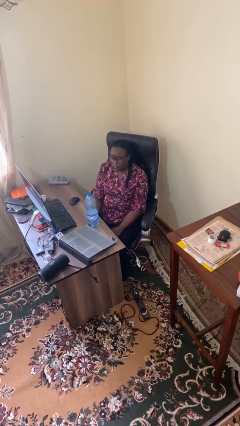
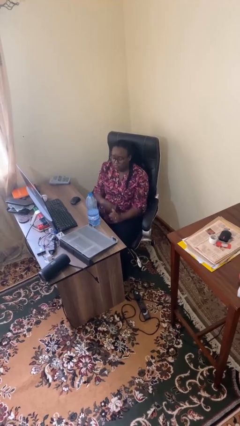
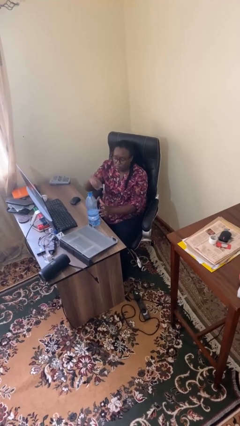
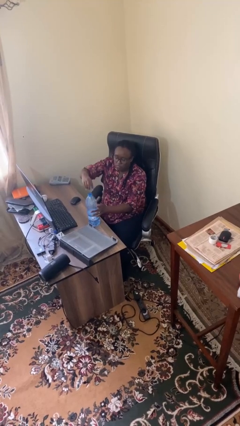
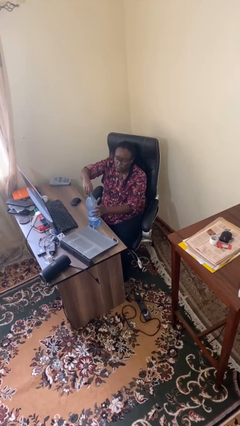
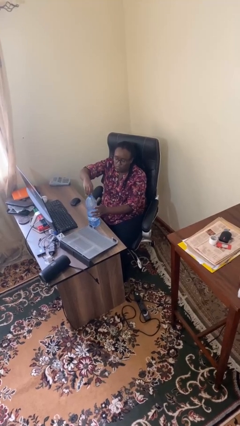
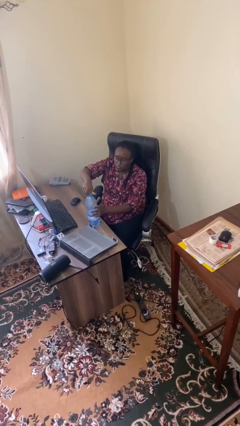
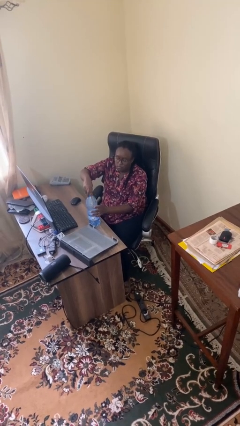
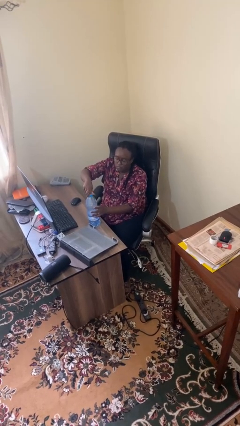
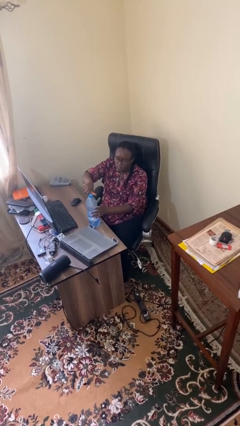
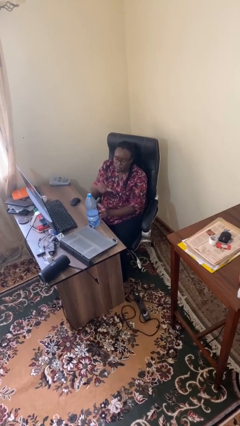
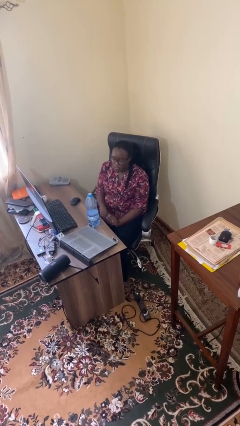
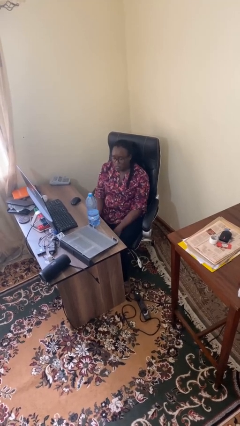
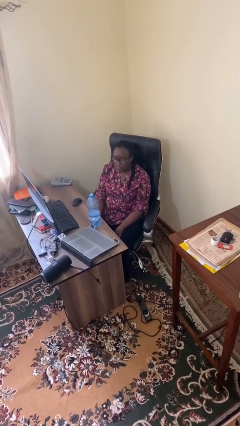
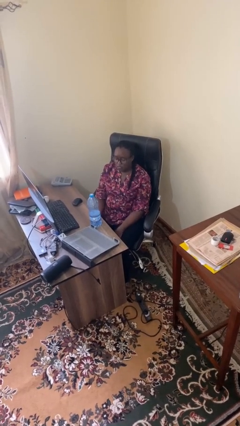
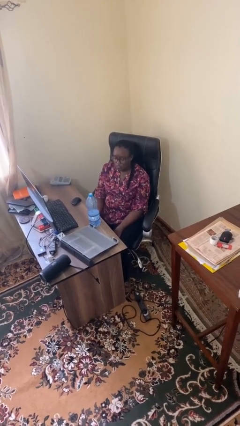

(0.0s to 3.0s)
person screws lid to bottle

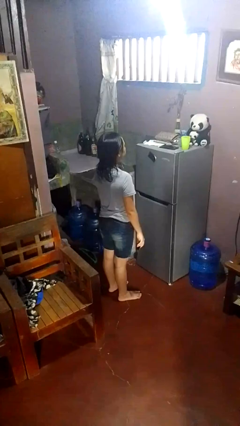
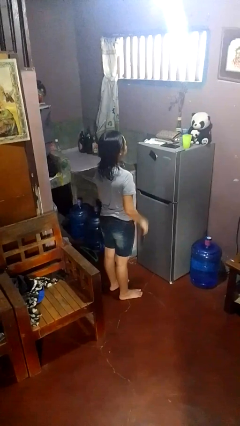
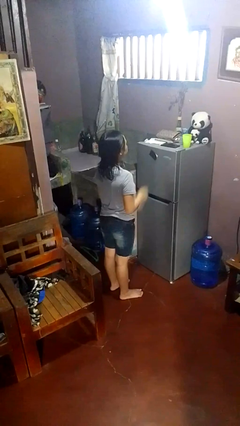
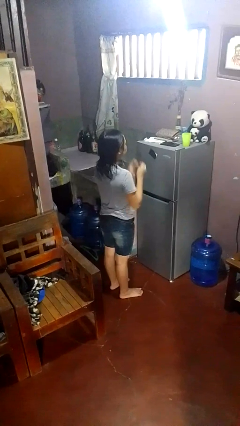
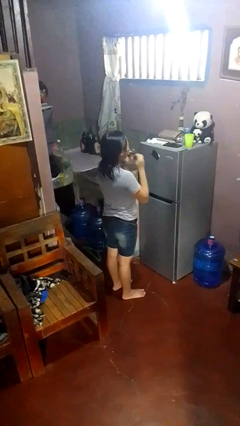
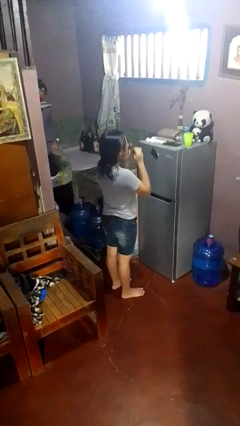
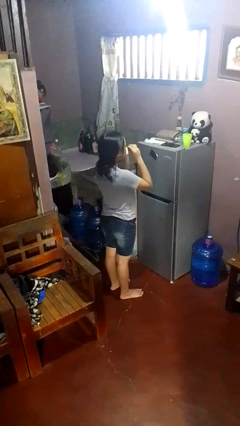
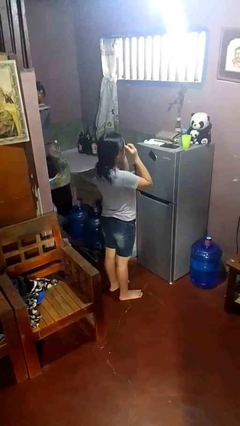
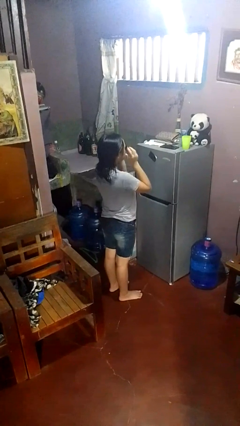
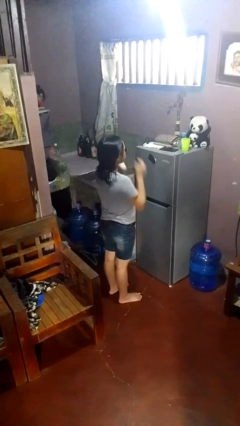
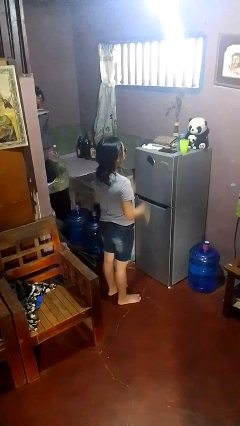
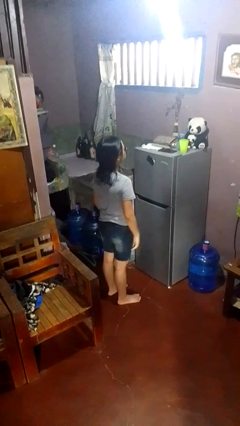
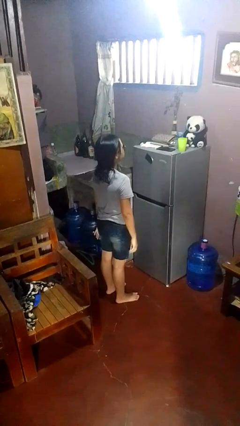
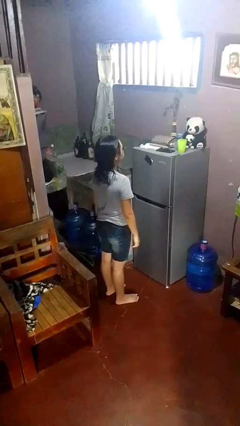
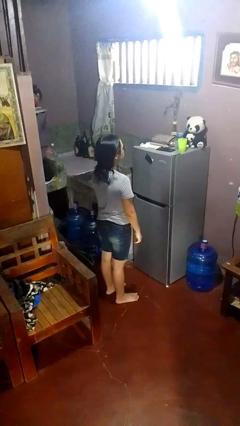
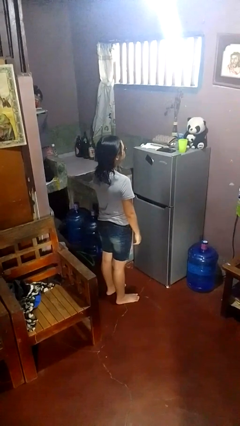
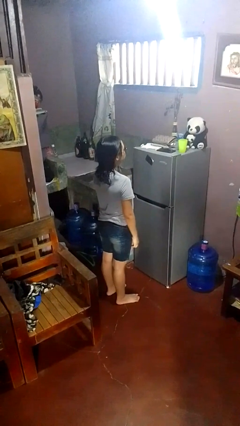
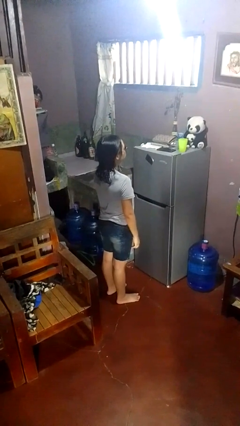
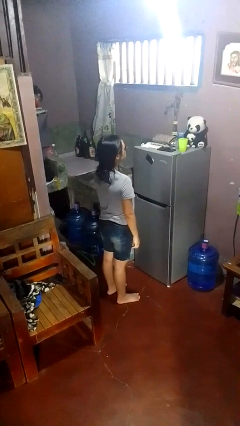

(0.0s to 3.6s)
person puts on sunglasses

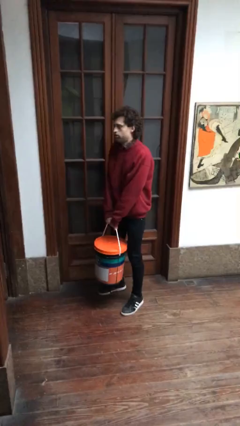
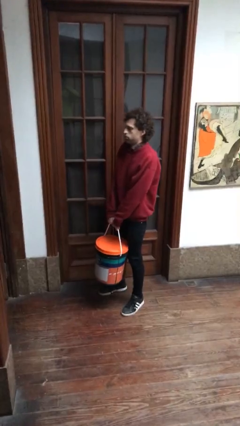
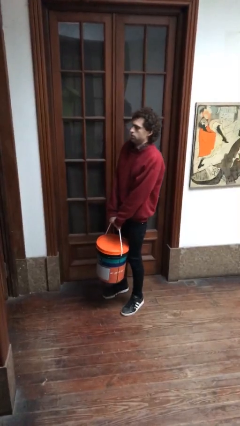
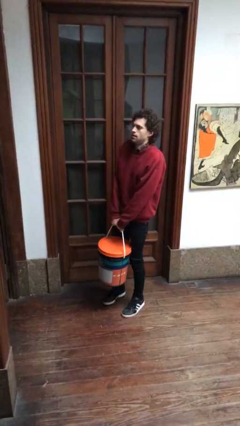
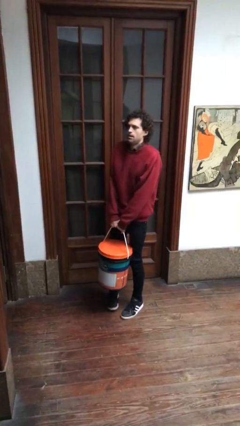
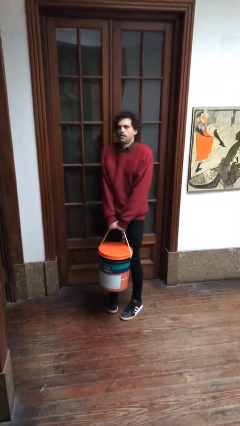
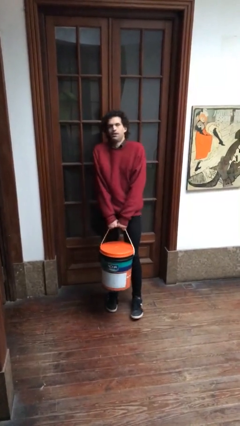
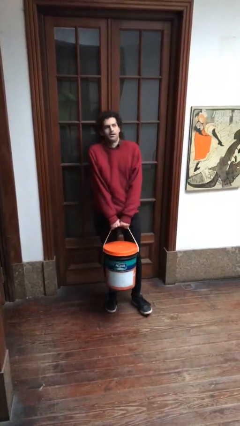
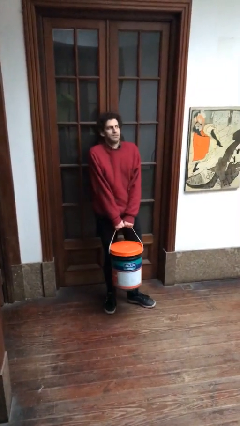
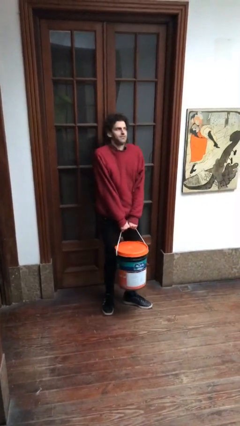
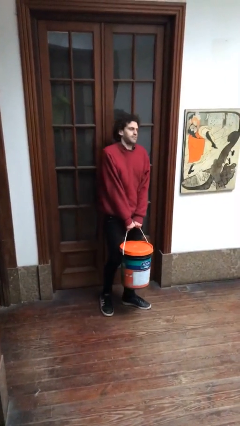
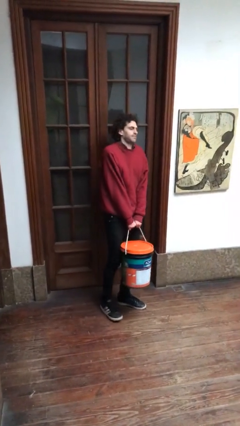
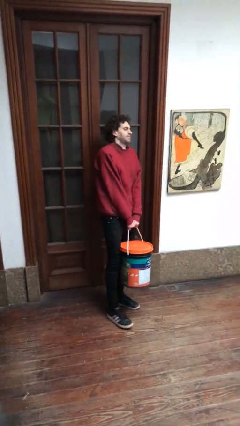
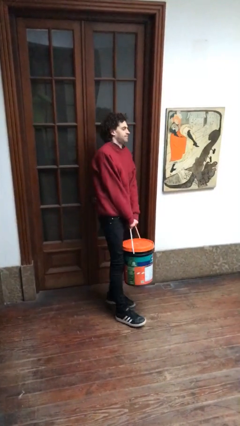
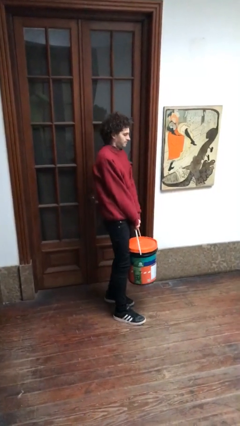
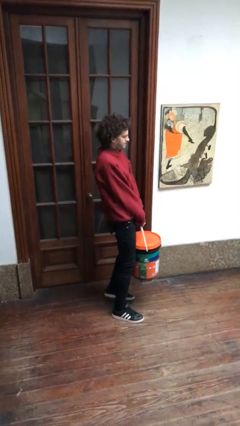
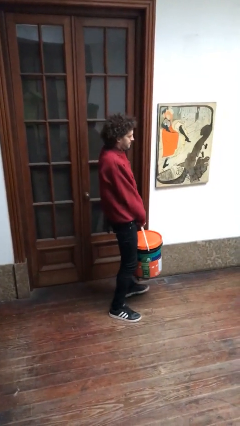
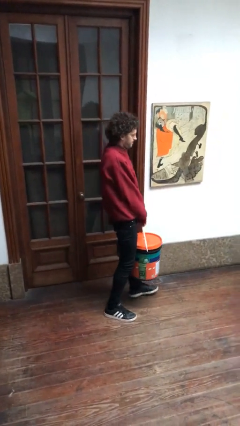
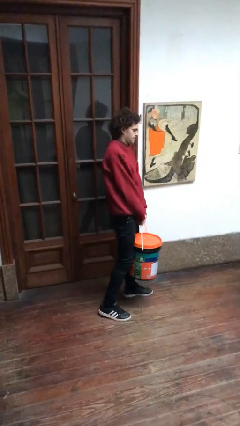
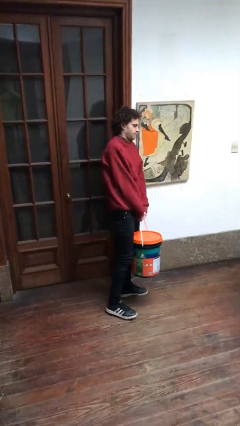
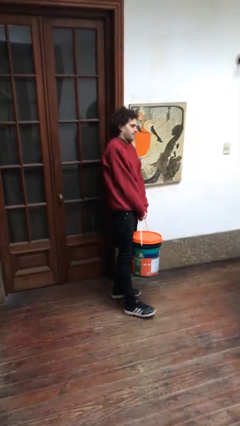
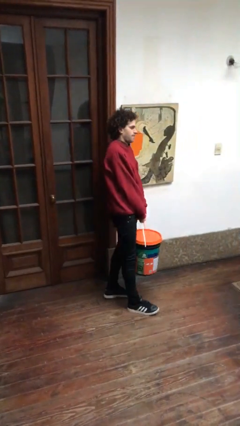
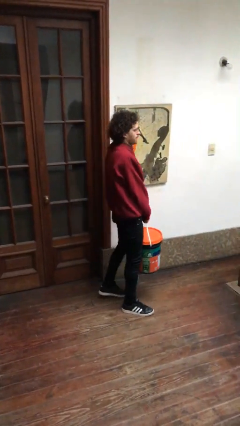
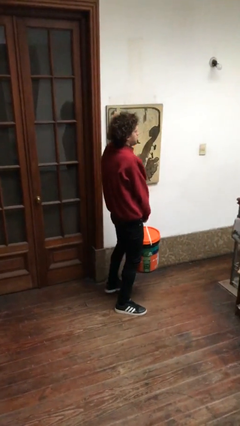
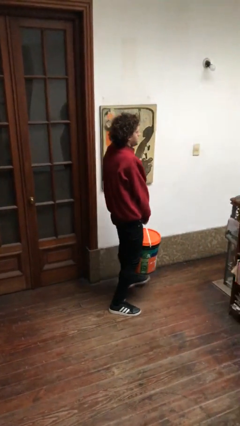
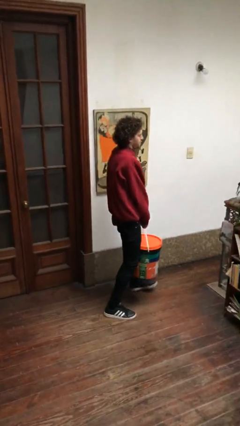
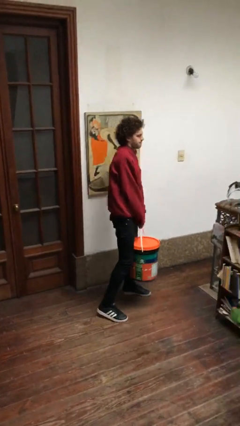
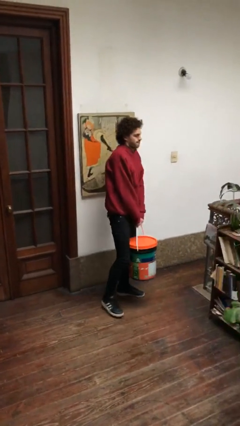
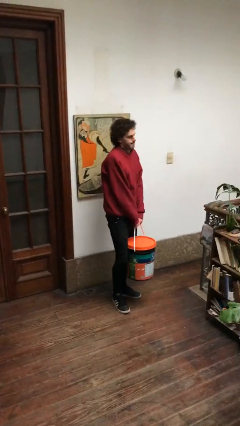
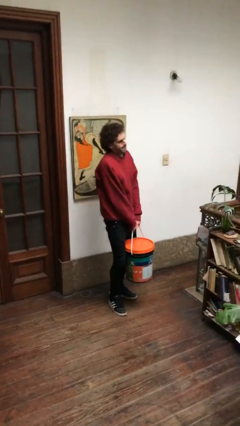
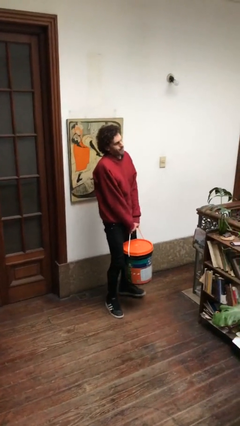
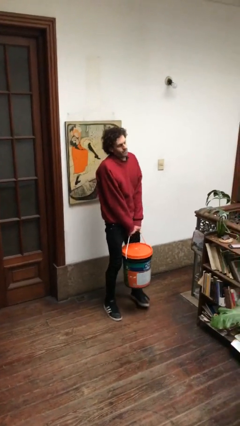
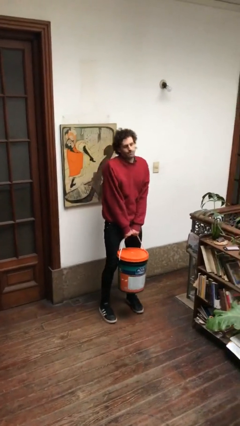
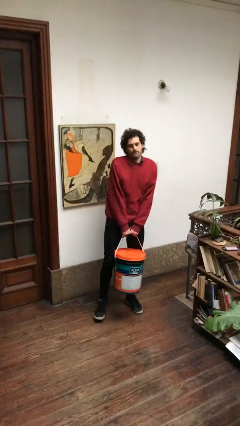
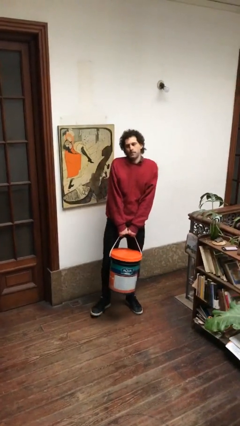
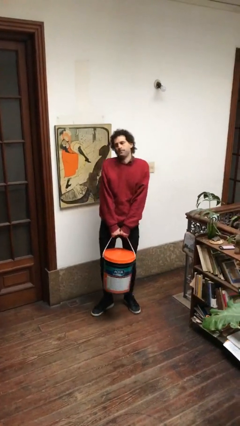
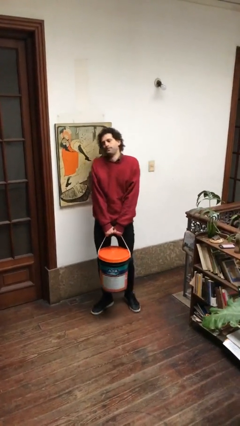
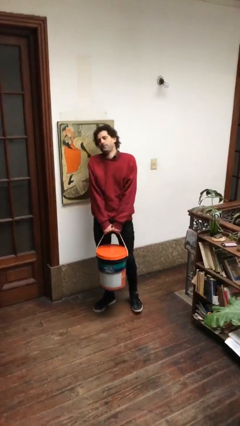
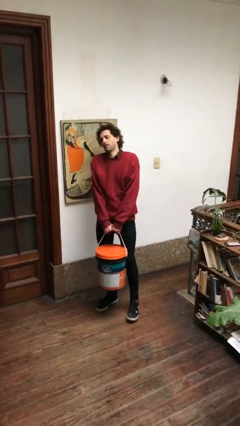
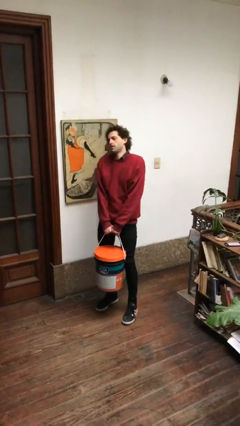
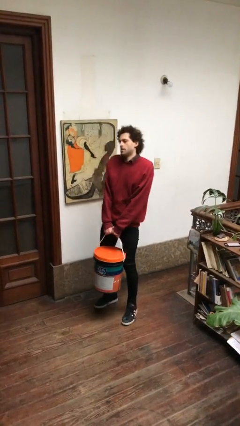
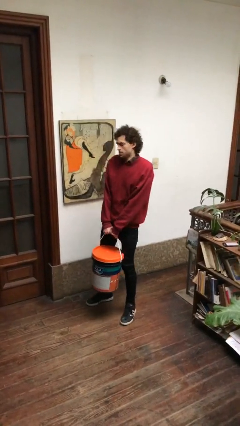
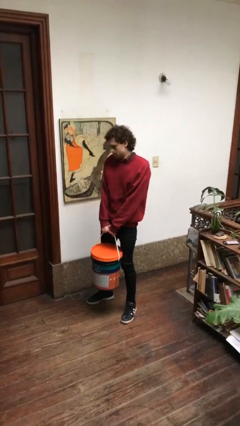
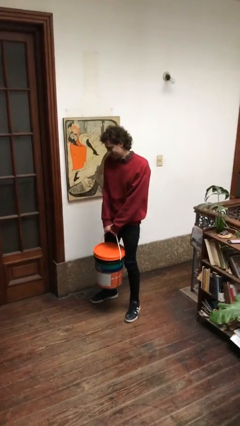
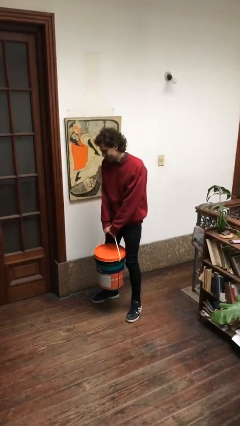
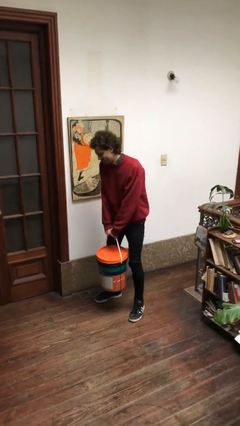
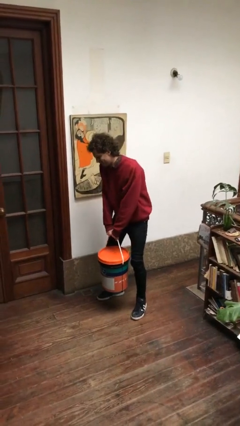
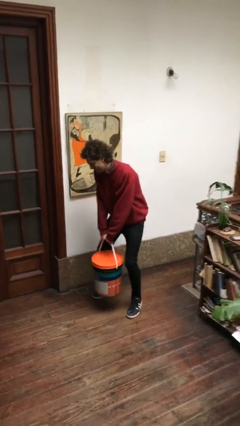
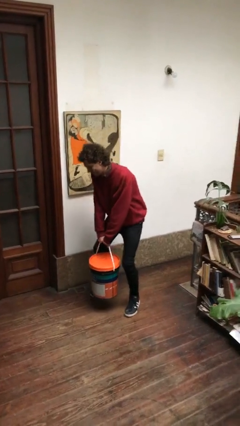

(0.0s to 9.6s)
person carries heavy object

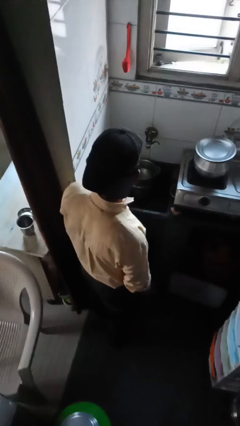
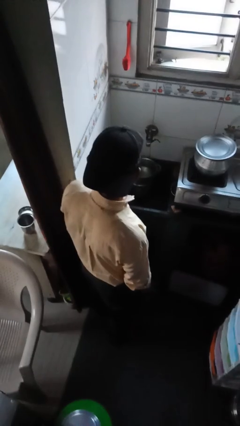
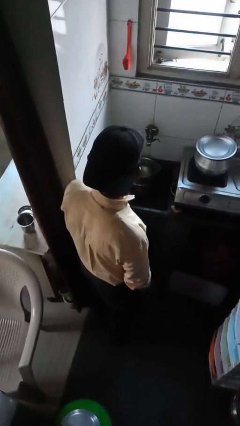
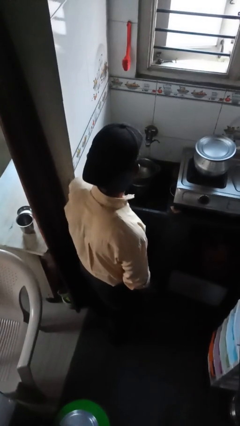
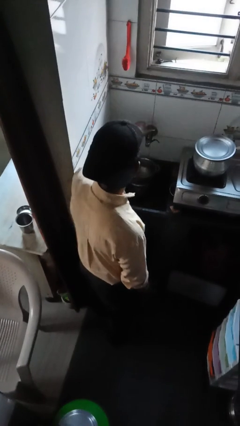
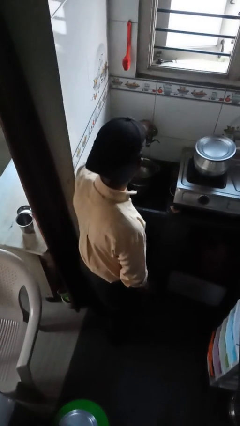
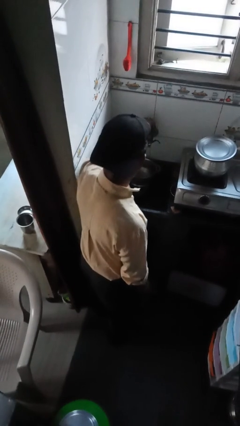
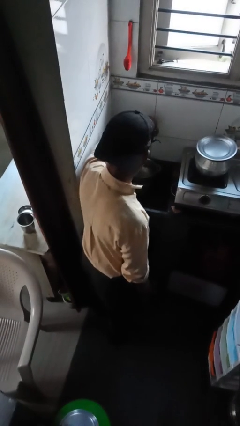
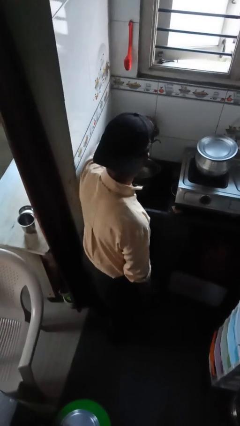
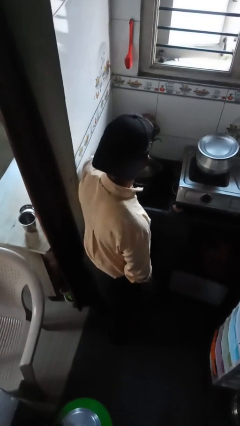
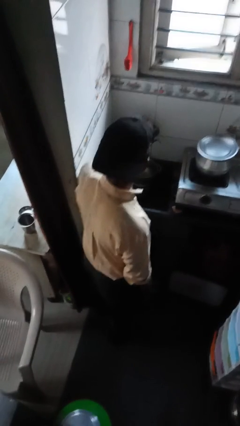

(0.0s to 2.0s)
person turns off faucet
